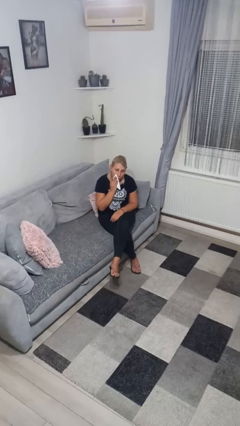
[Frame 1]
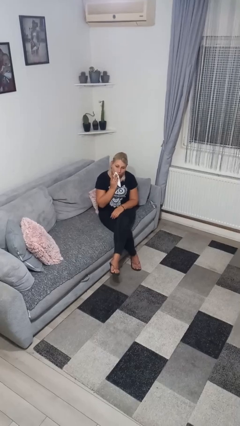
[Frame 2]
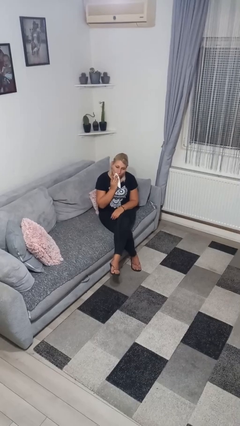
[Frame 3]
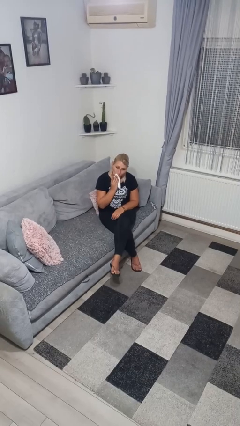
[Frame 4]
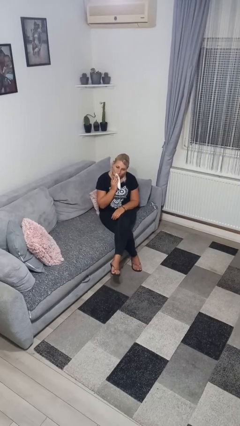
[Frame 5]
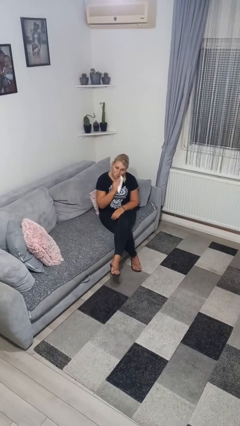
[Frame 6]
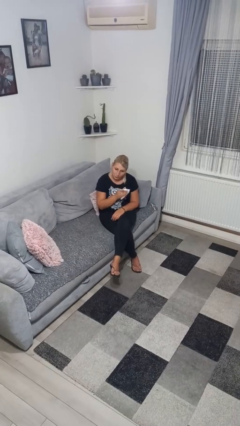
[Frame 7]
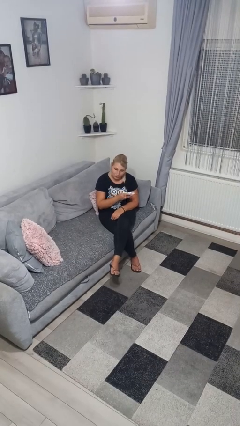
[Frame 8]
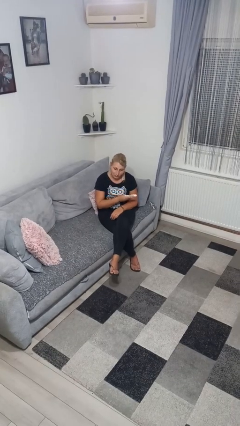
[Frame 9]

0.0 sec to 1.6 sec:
person wipes mouth with napkin

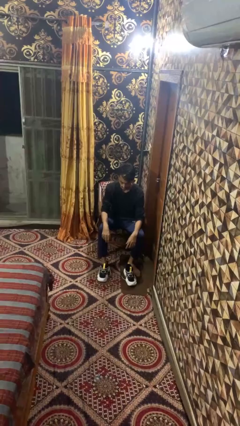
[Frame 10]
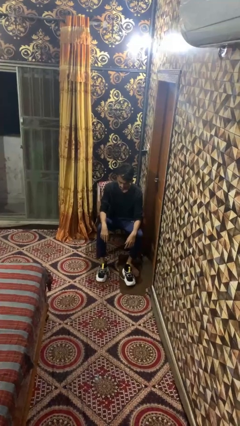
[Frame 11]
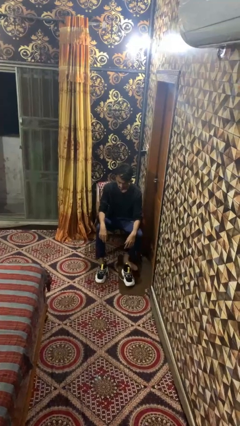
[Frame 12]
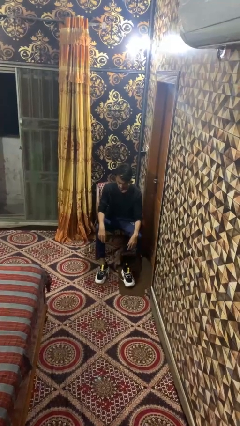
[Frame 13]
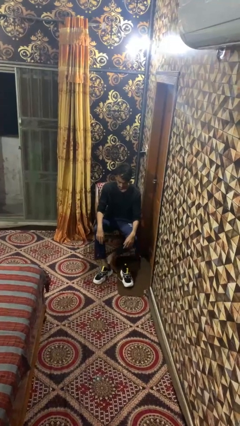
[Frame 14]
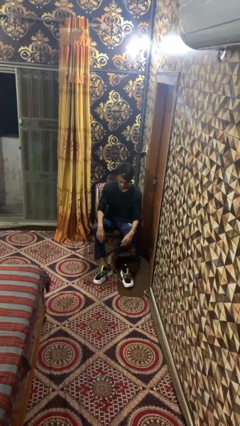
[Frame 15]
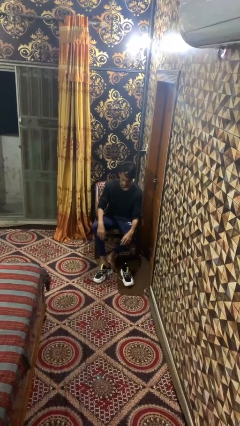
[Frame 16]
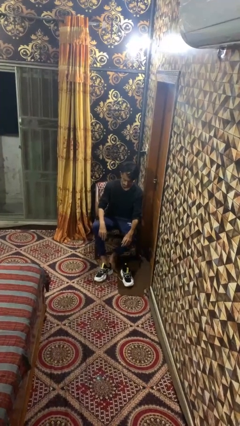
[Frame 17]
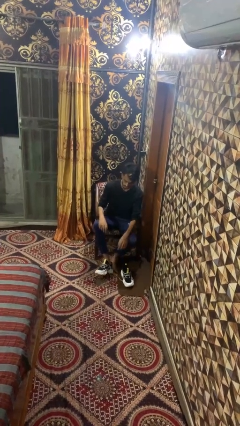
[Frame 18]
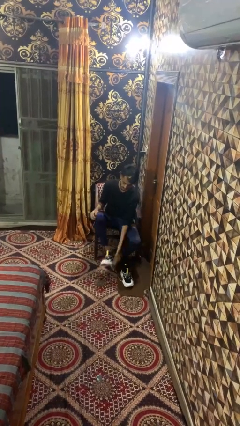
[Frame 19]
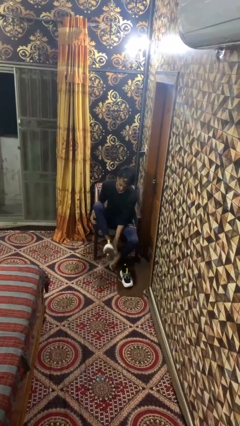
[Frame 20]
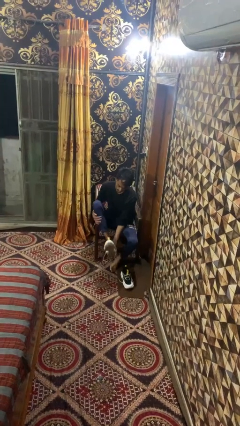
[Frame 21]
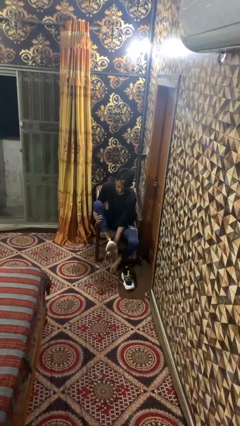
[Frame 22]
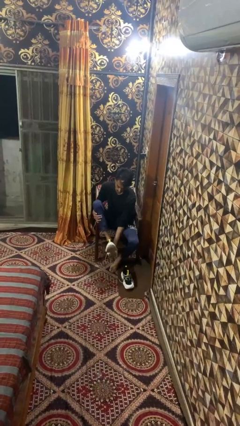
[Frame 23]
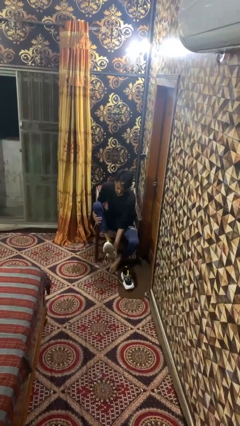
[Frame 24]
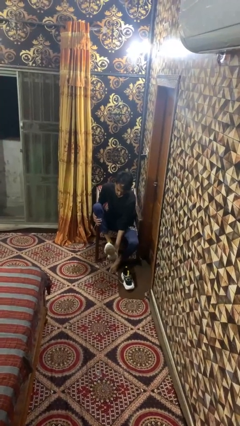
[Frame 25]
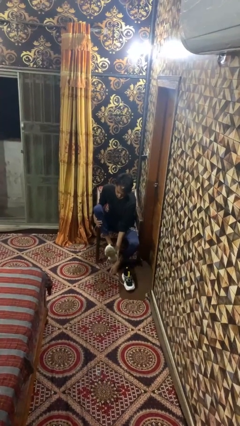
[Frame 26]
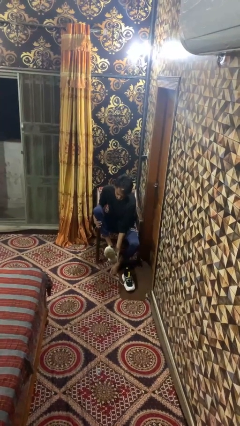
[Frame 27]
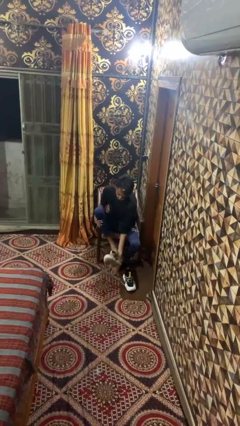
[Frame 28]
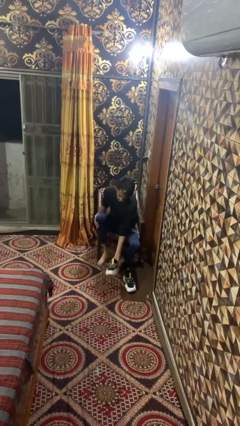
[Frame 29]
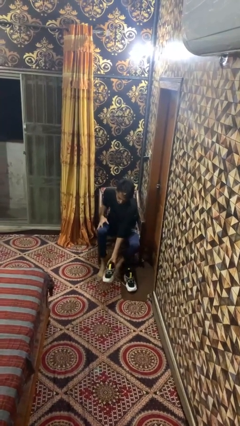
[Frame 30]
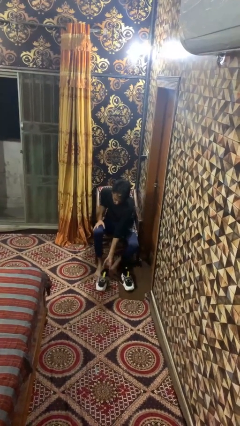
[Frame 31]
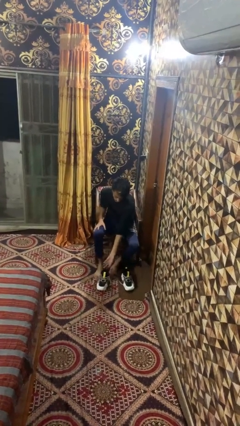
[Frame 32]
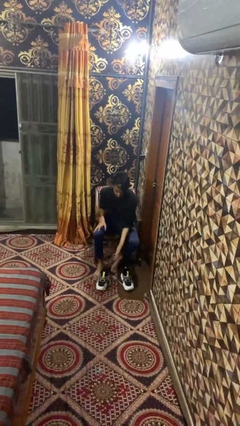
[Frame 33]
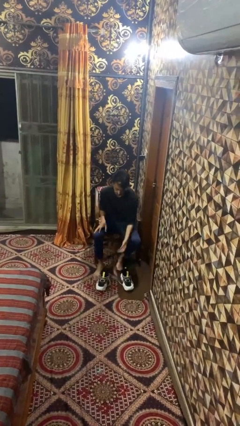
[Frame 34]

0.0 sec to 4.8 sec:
person takes off shoes

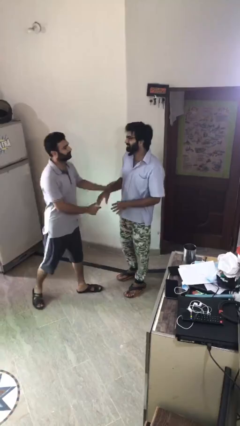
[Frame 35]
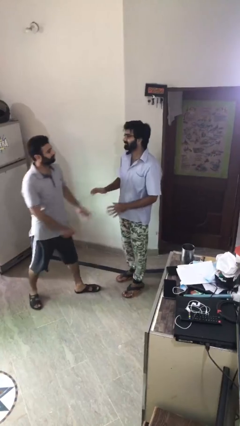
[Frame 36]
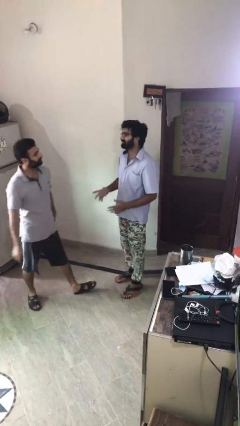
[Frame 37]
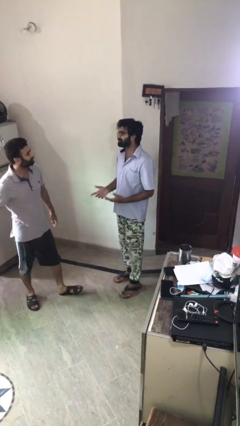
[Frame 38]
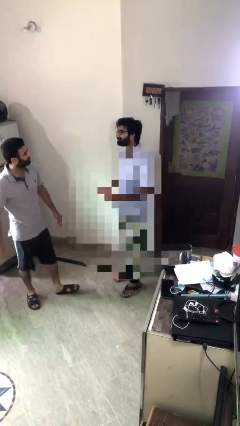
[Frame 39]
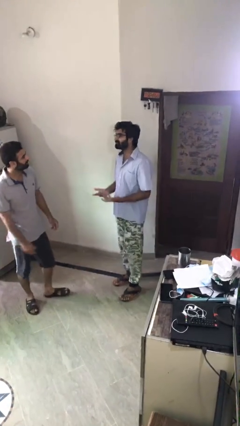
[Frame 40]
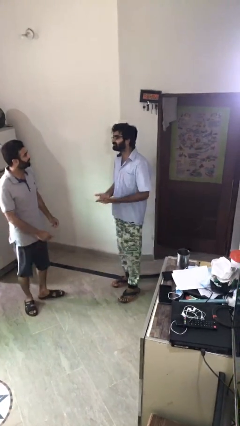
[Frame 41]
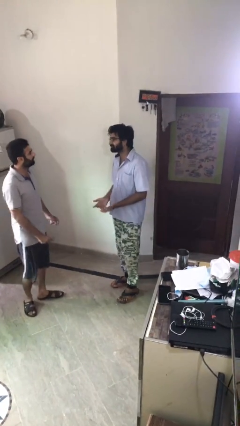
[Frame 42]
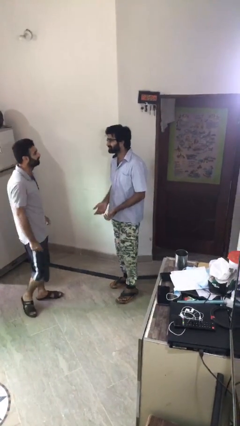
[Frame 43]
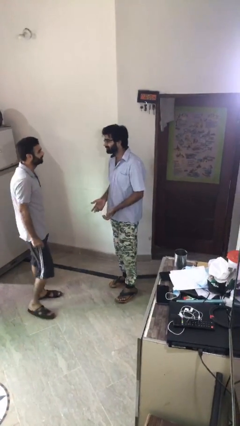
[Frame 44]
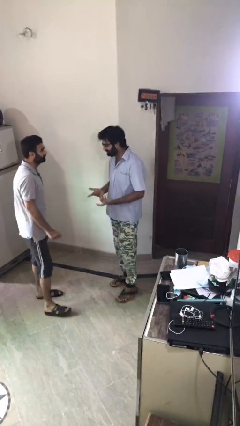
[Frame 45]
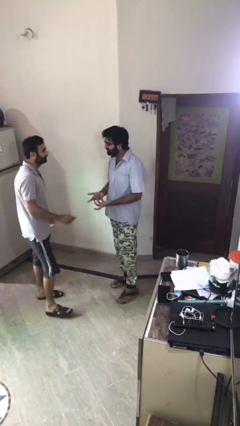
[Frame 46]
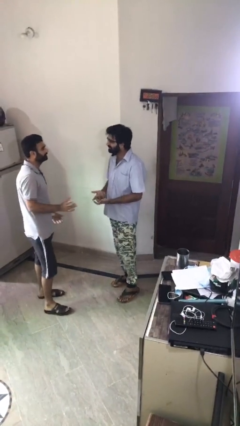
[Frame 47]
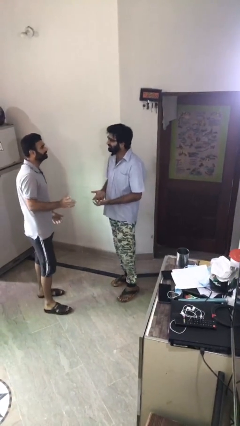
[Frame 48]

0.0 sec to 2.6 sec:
person talks to person

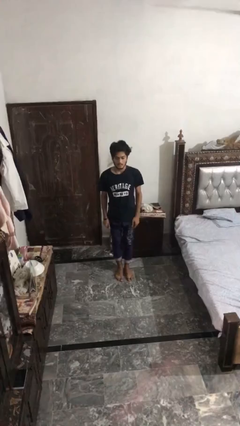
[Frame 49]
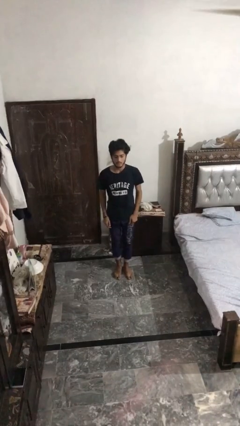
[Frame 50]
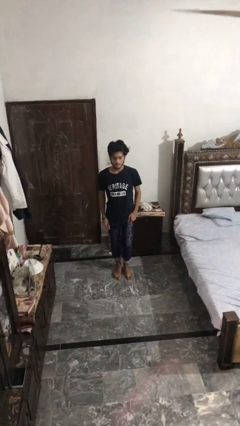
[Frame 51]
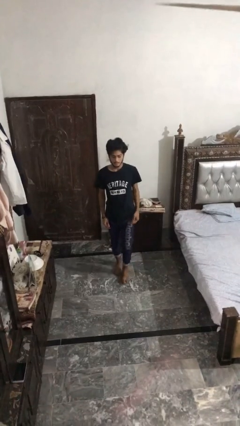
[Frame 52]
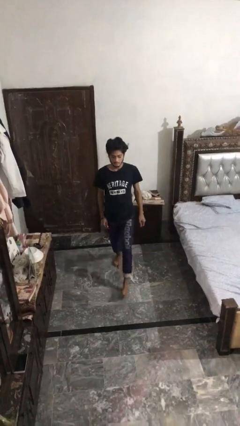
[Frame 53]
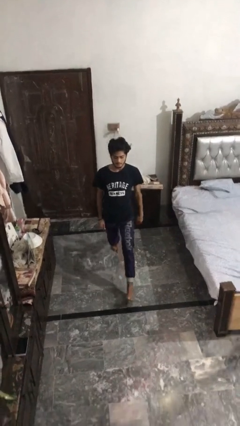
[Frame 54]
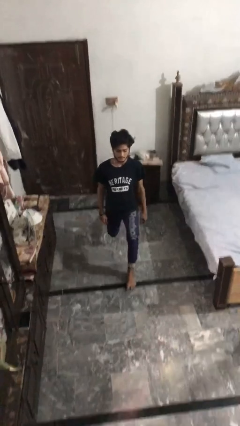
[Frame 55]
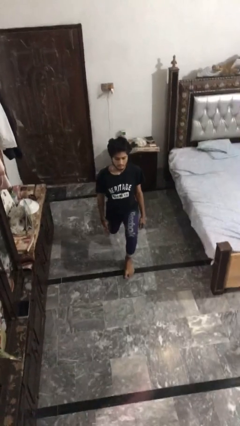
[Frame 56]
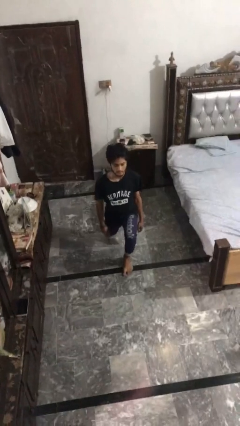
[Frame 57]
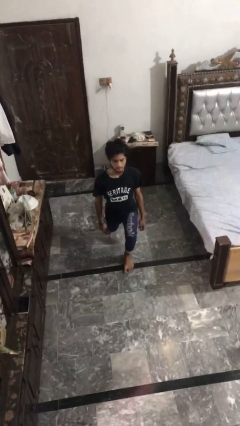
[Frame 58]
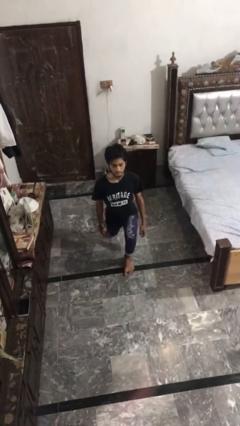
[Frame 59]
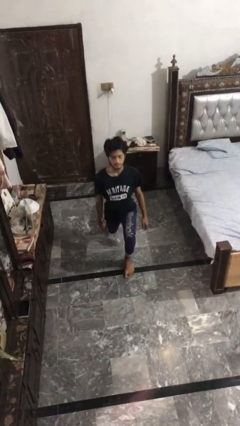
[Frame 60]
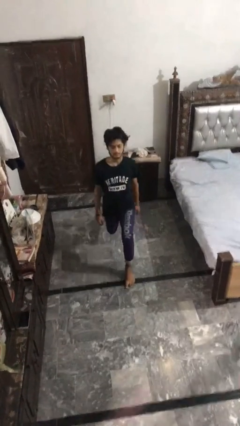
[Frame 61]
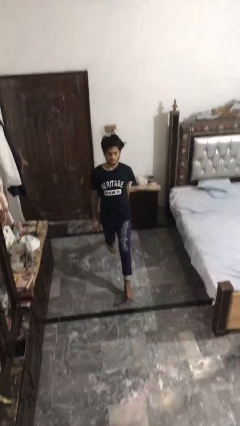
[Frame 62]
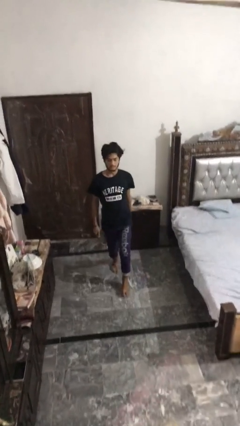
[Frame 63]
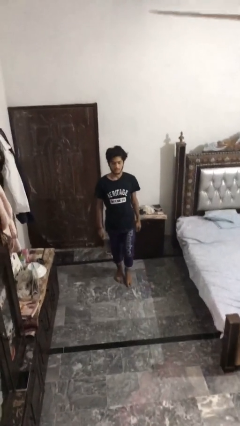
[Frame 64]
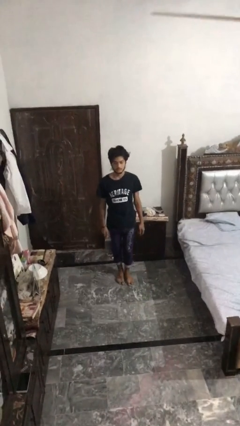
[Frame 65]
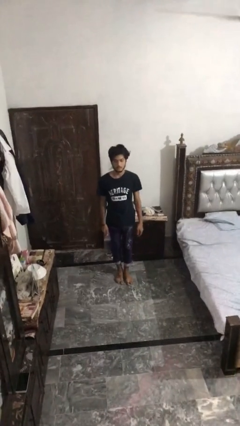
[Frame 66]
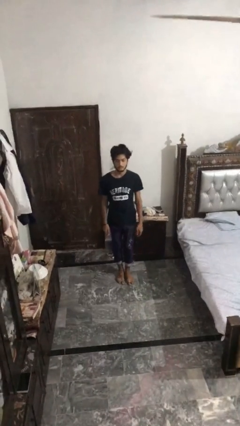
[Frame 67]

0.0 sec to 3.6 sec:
person exercises with lunges

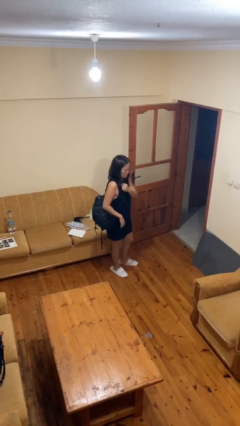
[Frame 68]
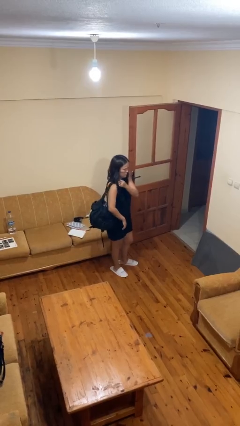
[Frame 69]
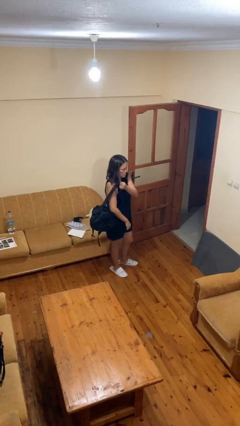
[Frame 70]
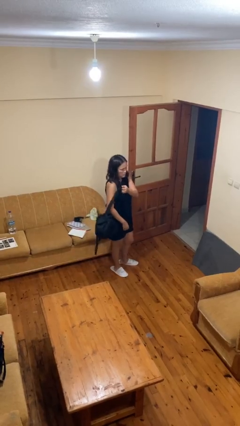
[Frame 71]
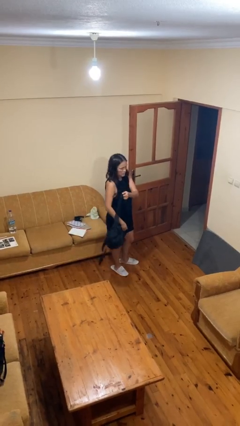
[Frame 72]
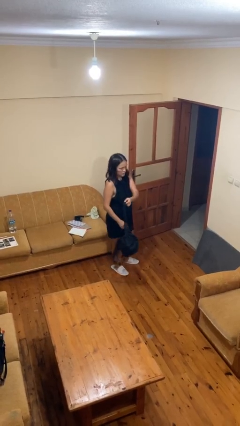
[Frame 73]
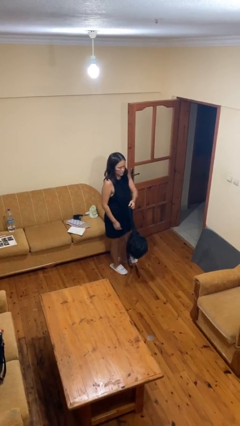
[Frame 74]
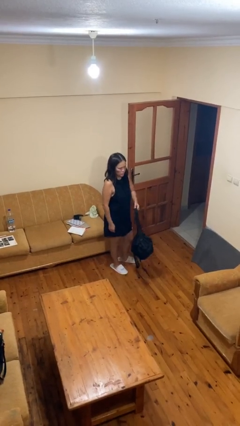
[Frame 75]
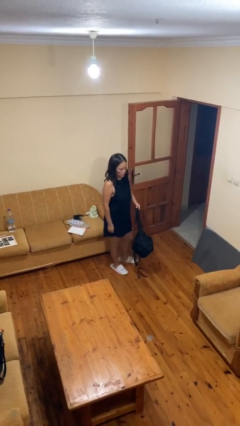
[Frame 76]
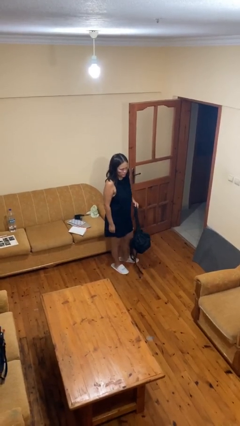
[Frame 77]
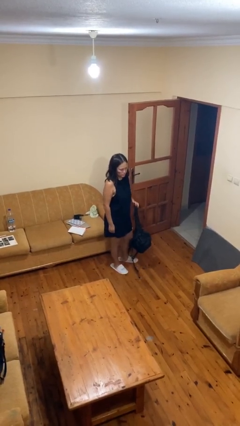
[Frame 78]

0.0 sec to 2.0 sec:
person takes off backpack

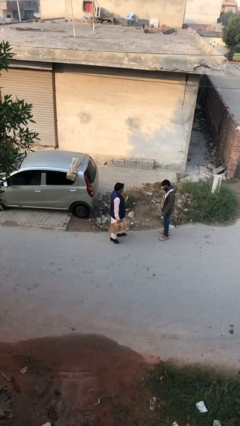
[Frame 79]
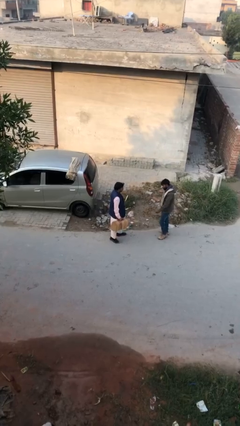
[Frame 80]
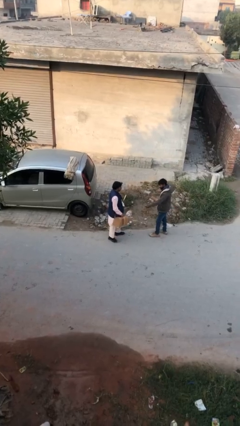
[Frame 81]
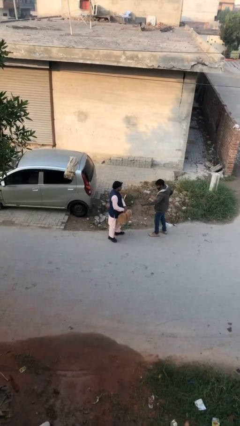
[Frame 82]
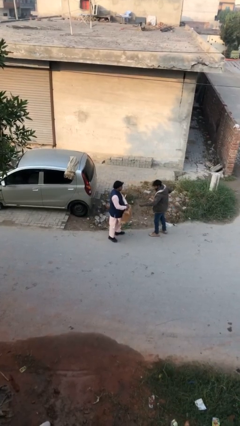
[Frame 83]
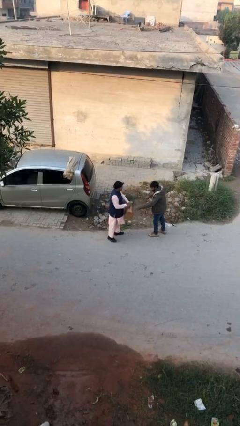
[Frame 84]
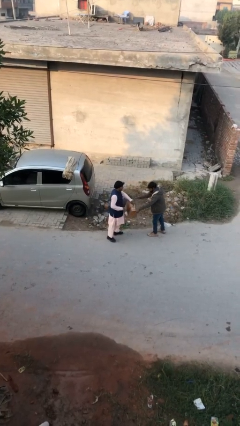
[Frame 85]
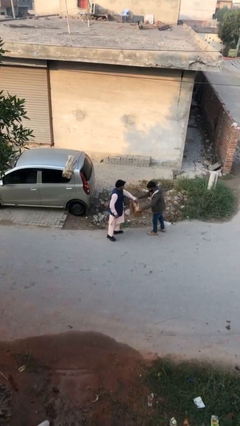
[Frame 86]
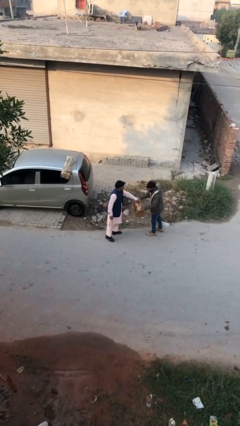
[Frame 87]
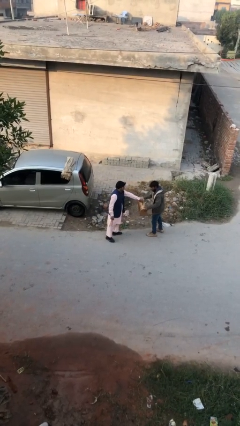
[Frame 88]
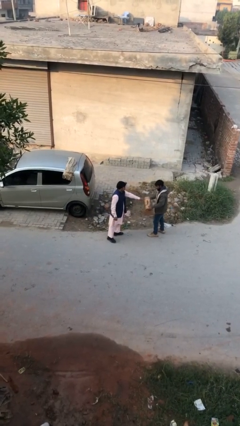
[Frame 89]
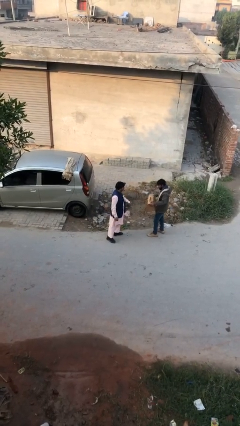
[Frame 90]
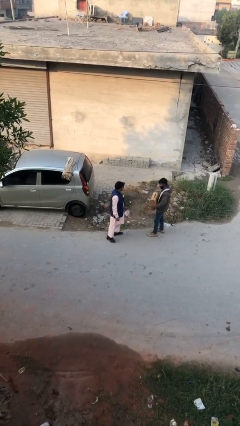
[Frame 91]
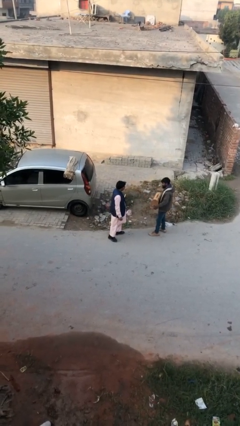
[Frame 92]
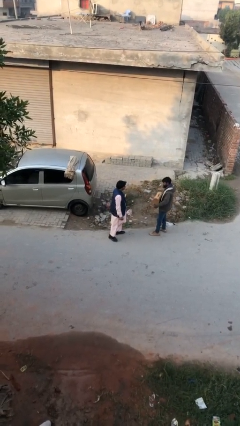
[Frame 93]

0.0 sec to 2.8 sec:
person transfers object to person
